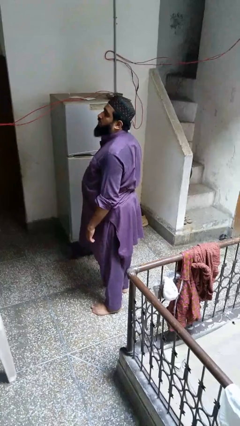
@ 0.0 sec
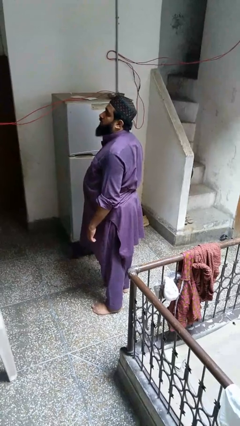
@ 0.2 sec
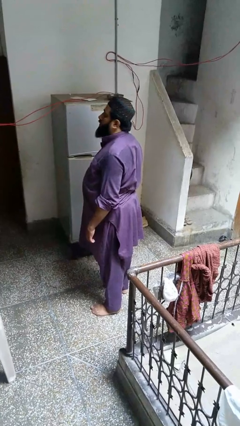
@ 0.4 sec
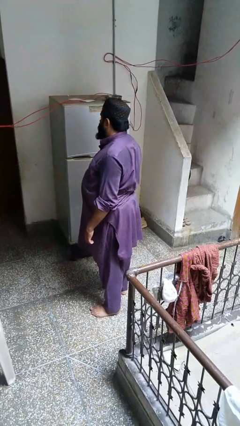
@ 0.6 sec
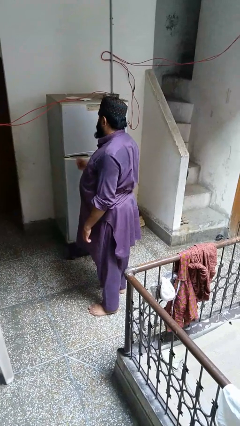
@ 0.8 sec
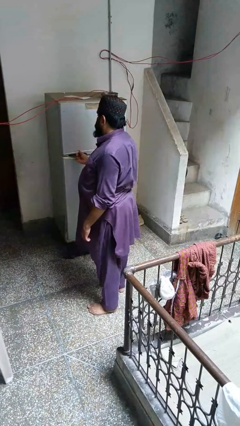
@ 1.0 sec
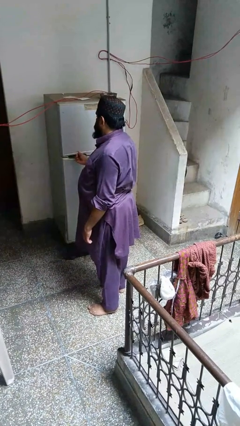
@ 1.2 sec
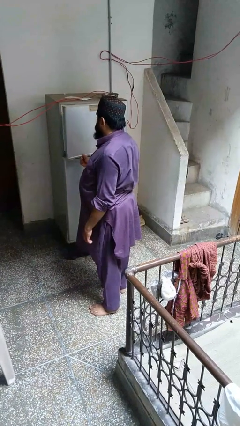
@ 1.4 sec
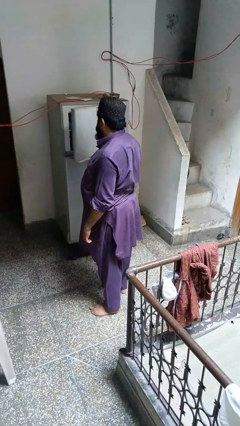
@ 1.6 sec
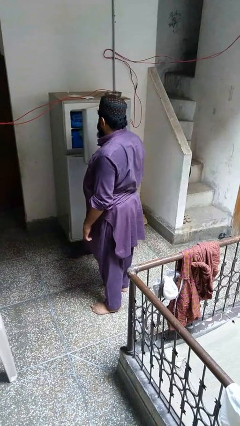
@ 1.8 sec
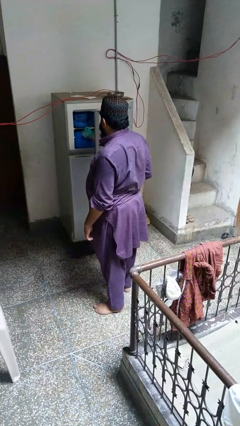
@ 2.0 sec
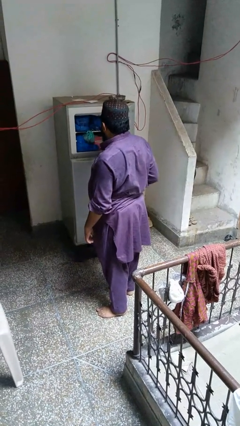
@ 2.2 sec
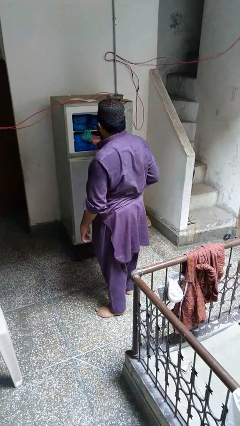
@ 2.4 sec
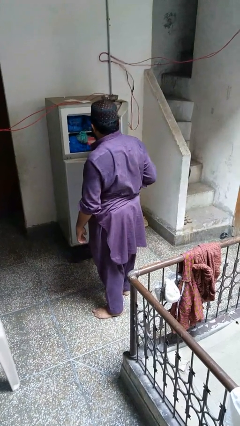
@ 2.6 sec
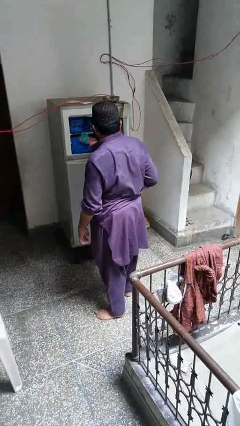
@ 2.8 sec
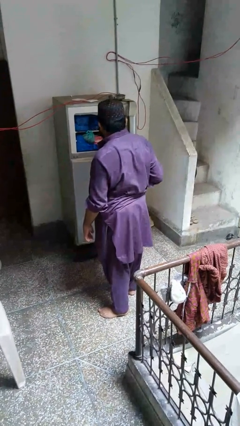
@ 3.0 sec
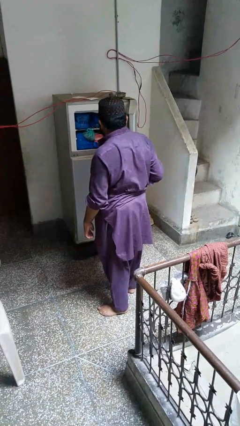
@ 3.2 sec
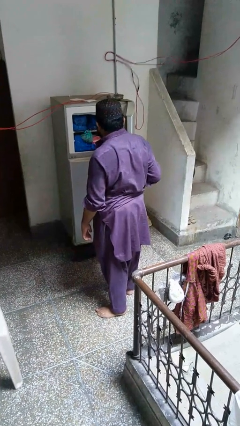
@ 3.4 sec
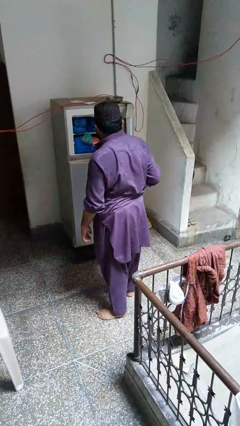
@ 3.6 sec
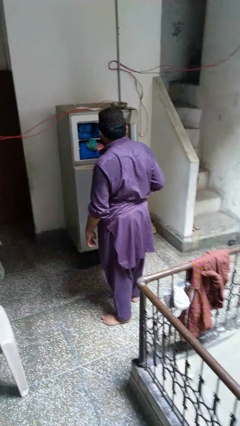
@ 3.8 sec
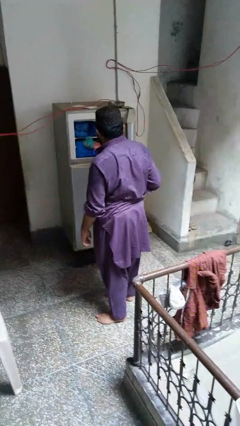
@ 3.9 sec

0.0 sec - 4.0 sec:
person opens refrigerator

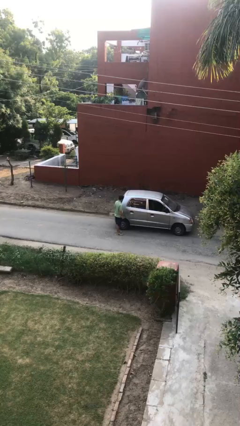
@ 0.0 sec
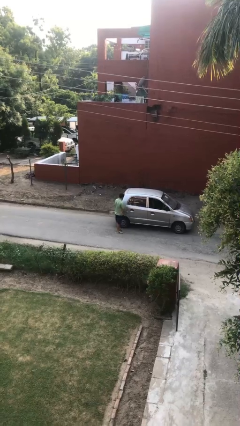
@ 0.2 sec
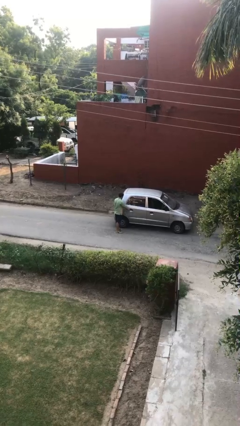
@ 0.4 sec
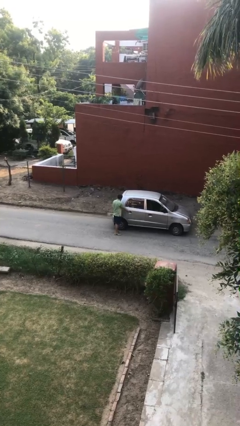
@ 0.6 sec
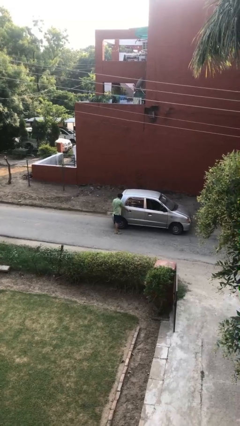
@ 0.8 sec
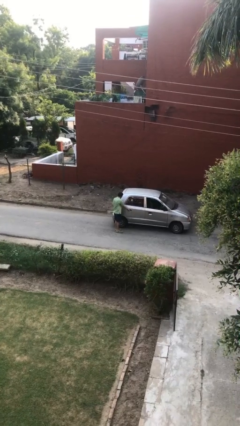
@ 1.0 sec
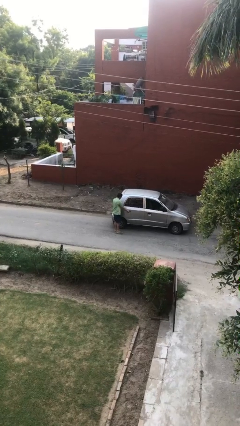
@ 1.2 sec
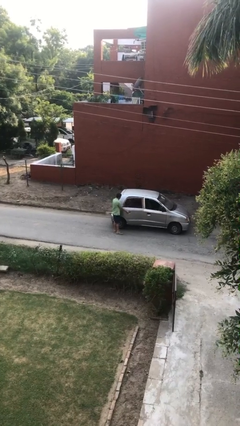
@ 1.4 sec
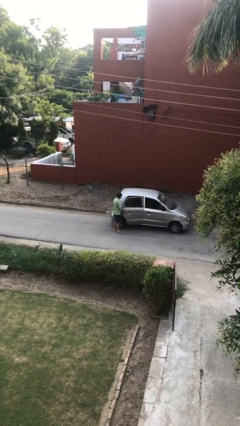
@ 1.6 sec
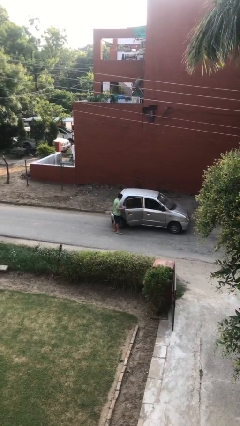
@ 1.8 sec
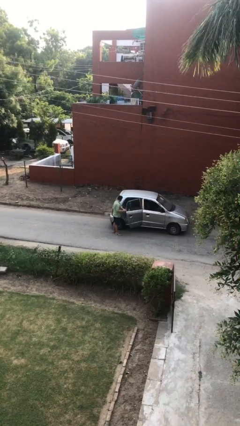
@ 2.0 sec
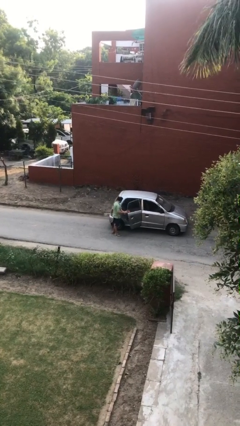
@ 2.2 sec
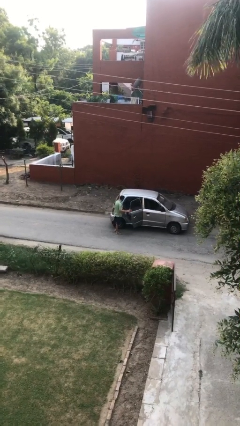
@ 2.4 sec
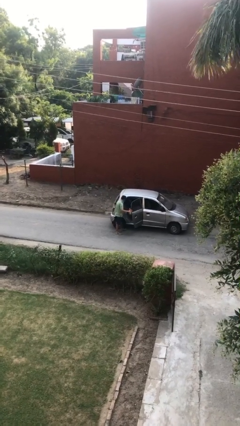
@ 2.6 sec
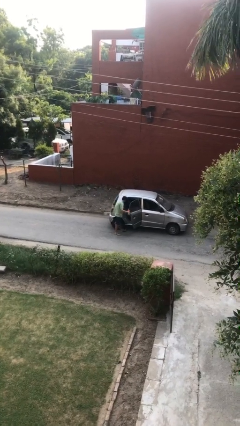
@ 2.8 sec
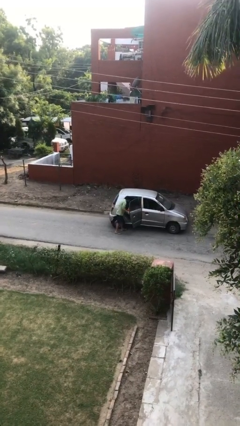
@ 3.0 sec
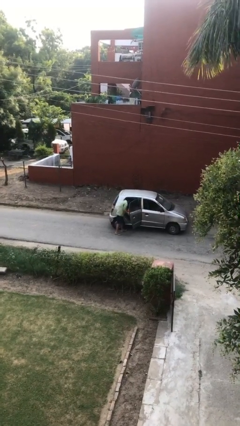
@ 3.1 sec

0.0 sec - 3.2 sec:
person opens car door

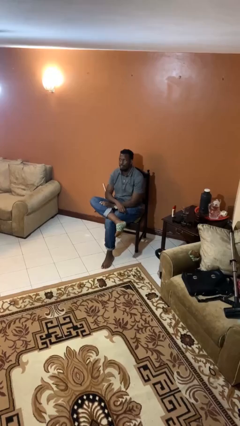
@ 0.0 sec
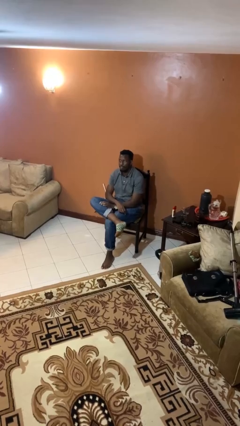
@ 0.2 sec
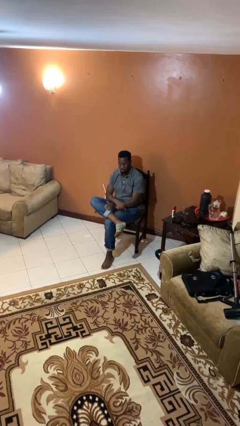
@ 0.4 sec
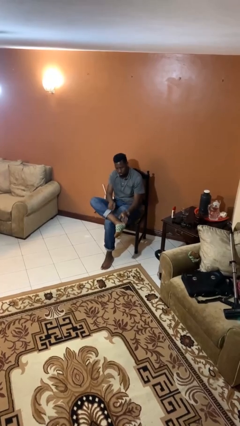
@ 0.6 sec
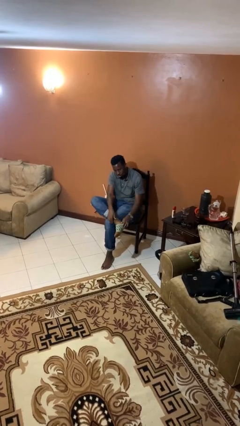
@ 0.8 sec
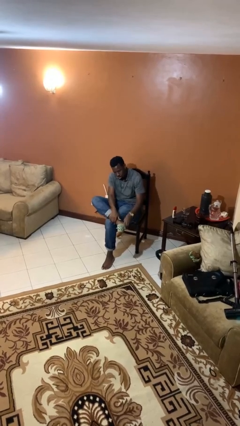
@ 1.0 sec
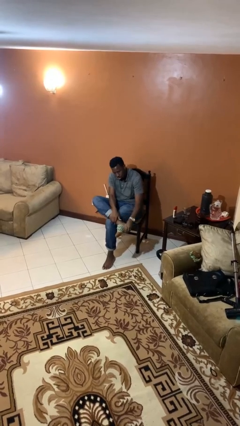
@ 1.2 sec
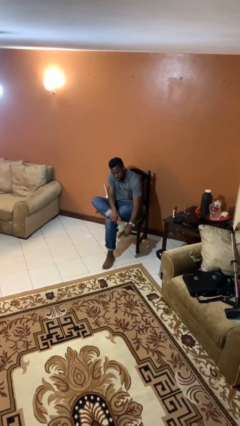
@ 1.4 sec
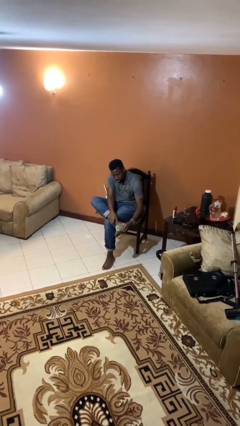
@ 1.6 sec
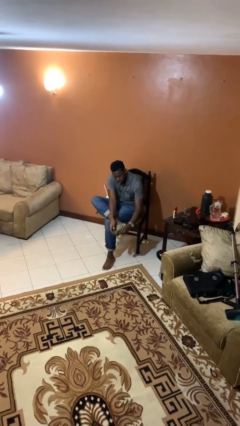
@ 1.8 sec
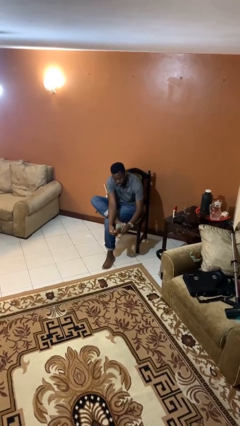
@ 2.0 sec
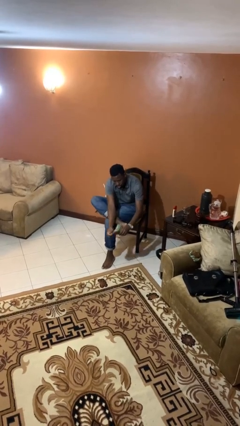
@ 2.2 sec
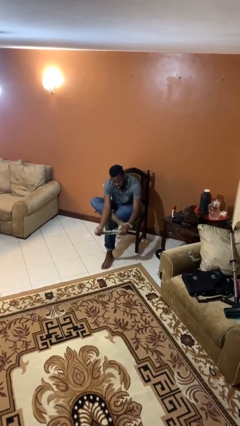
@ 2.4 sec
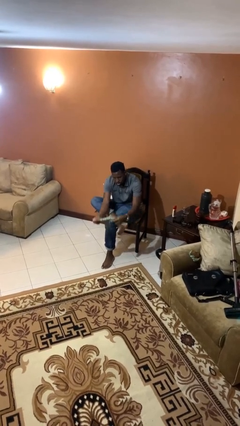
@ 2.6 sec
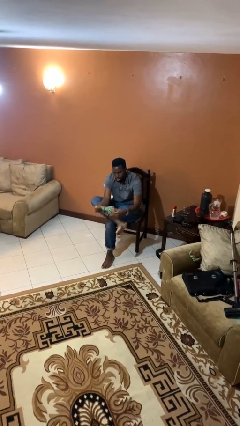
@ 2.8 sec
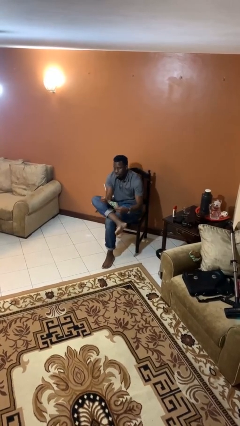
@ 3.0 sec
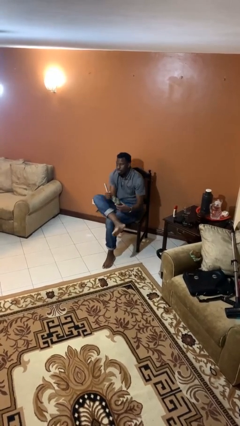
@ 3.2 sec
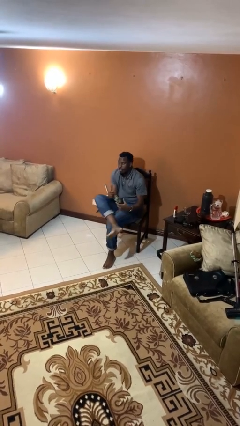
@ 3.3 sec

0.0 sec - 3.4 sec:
person takes off socks

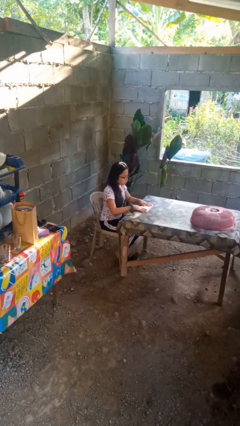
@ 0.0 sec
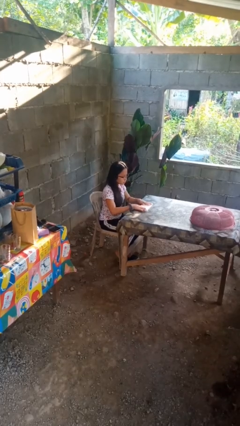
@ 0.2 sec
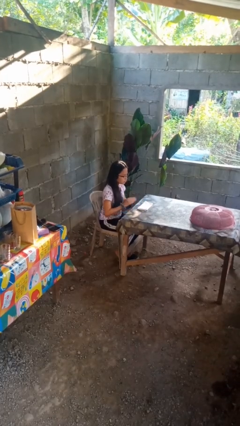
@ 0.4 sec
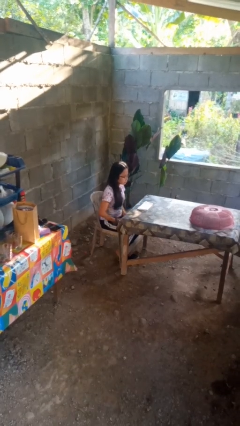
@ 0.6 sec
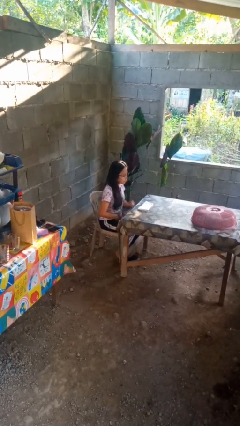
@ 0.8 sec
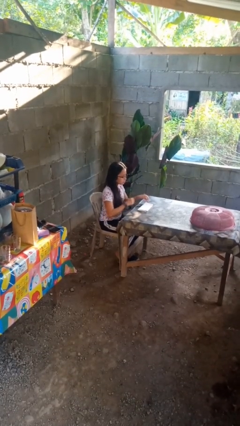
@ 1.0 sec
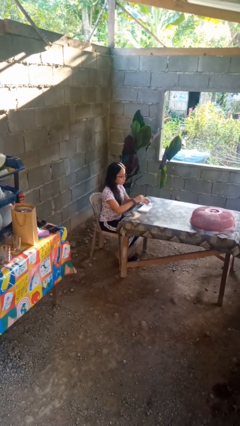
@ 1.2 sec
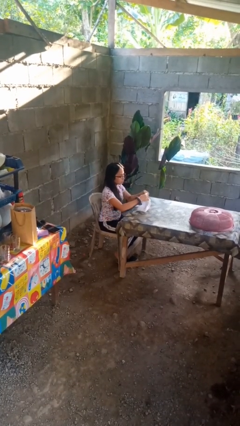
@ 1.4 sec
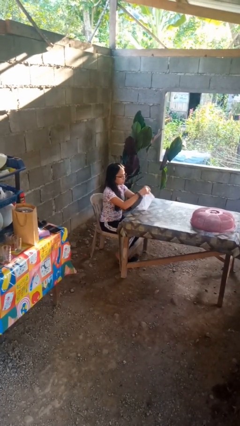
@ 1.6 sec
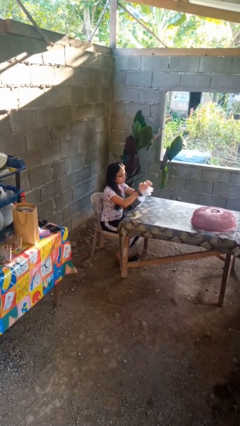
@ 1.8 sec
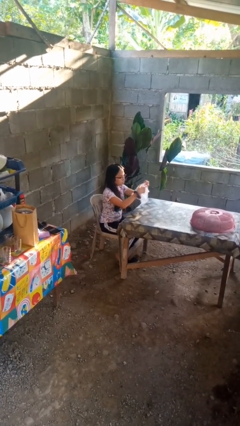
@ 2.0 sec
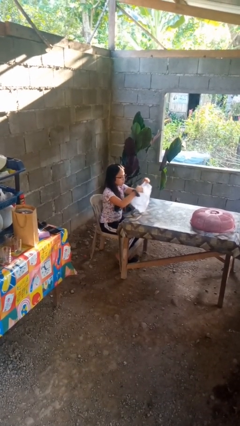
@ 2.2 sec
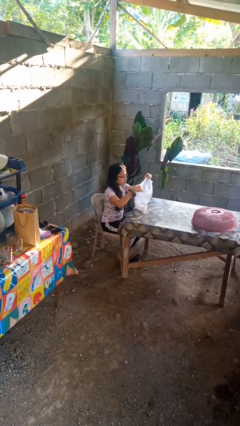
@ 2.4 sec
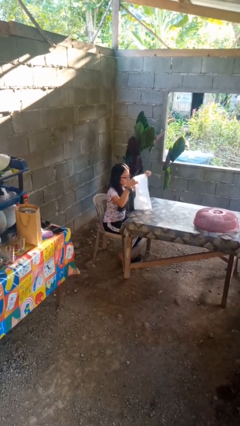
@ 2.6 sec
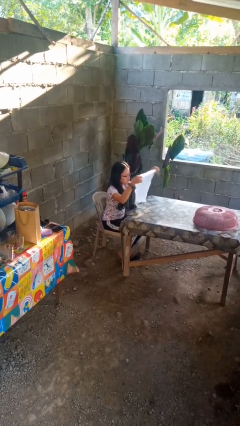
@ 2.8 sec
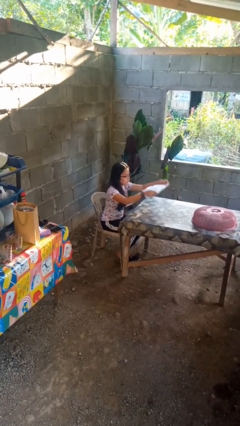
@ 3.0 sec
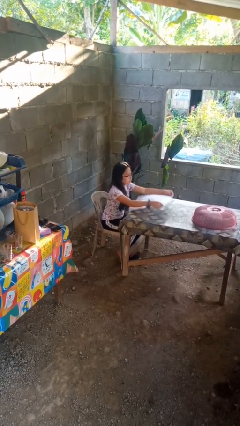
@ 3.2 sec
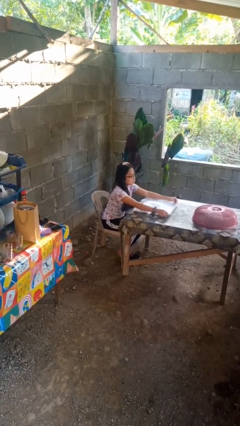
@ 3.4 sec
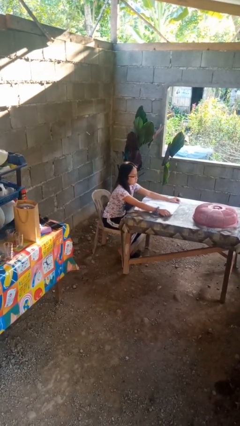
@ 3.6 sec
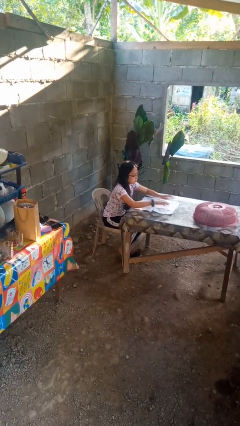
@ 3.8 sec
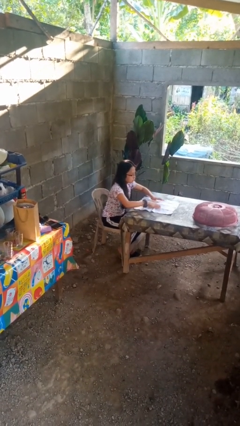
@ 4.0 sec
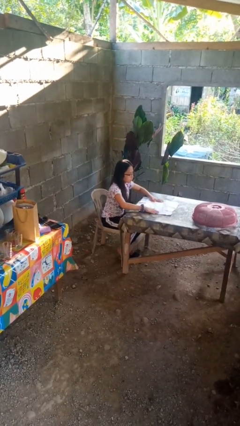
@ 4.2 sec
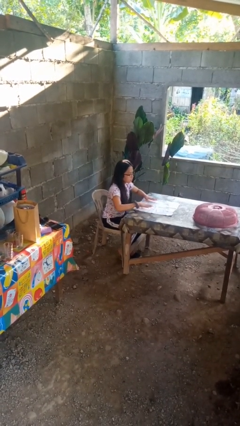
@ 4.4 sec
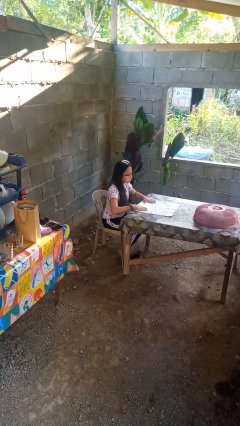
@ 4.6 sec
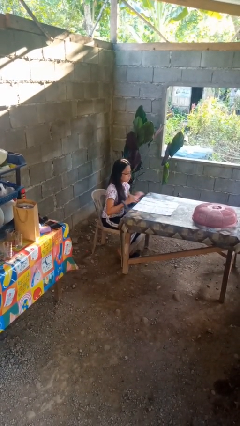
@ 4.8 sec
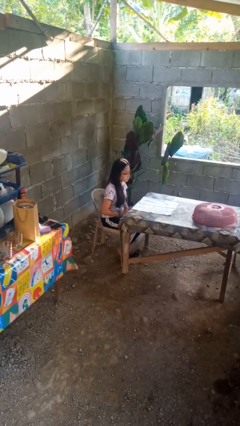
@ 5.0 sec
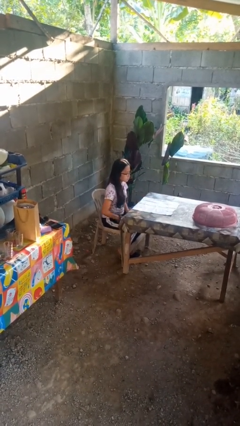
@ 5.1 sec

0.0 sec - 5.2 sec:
person spreads tablecloth

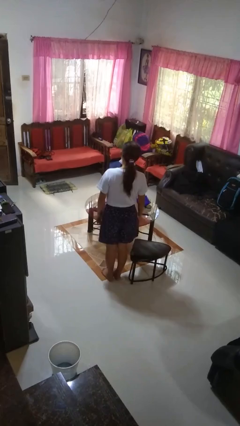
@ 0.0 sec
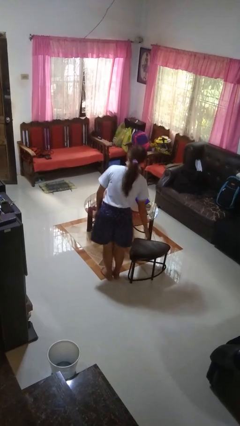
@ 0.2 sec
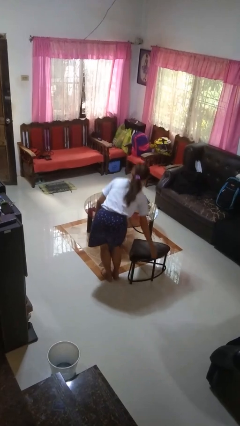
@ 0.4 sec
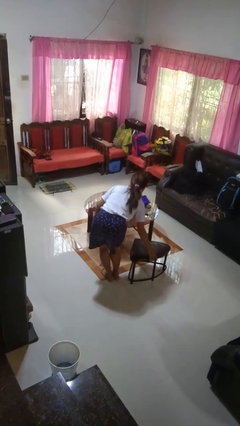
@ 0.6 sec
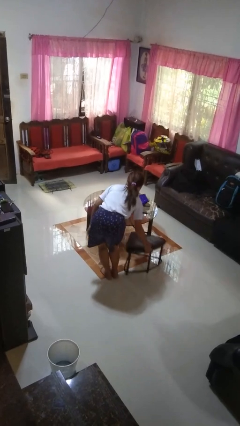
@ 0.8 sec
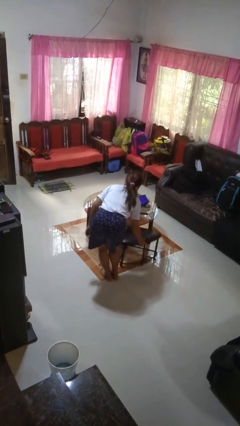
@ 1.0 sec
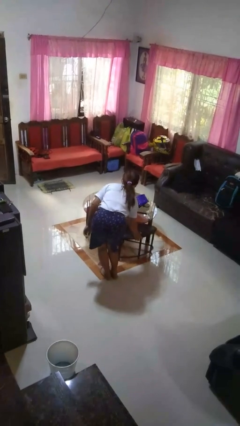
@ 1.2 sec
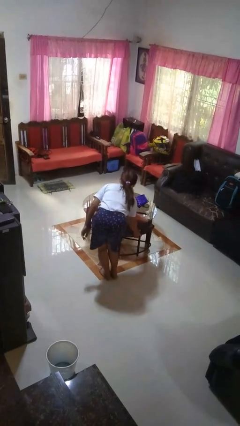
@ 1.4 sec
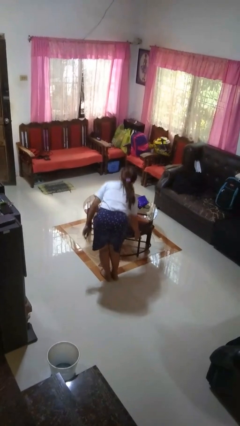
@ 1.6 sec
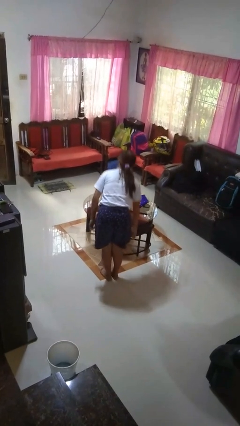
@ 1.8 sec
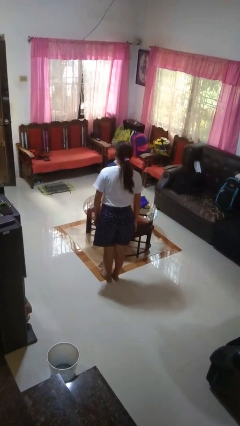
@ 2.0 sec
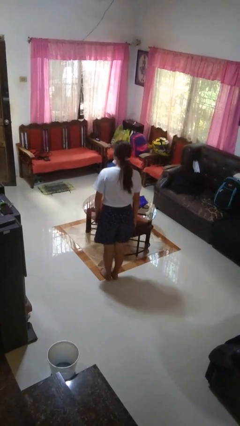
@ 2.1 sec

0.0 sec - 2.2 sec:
person pushes in chair
